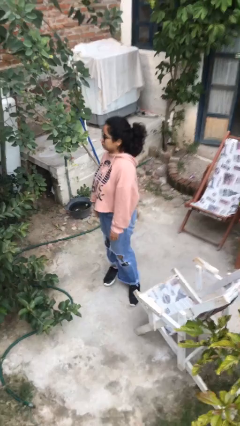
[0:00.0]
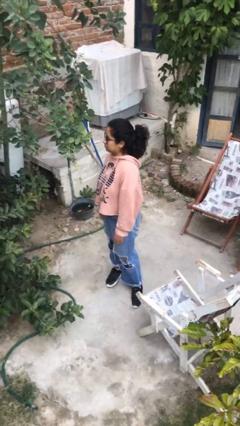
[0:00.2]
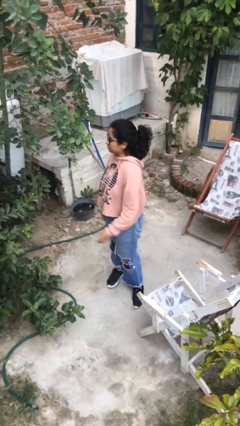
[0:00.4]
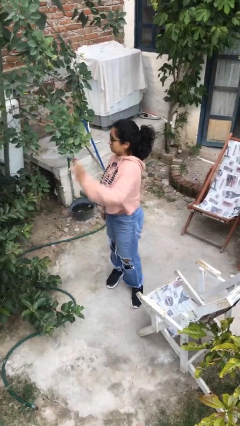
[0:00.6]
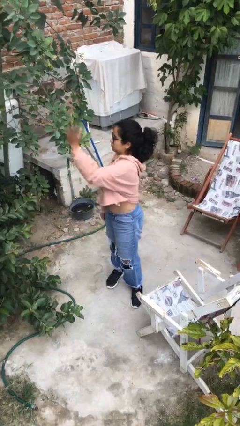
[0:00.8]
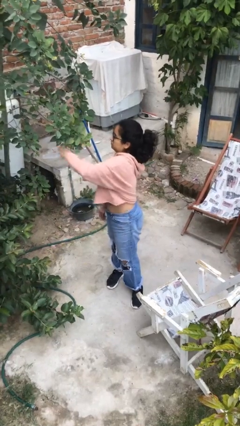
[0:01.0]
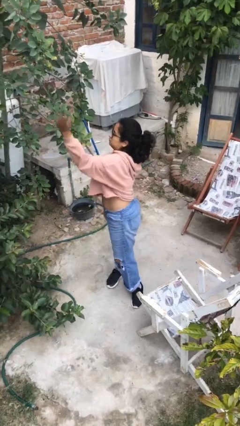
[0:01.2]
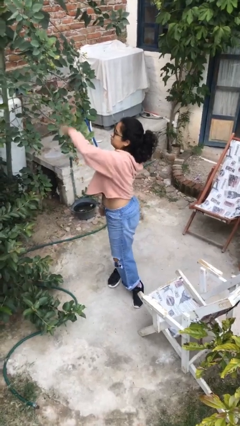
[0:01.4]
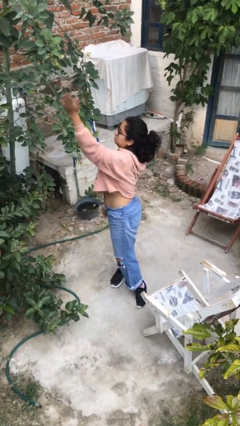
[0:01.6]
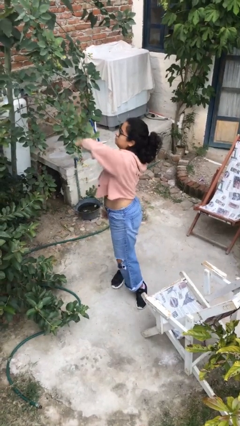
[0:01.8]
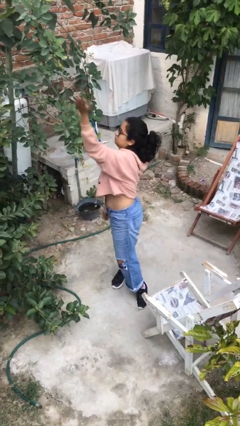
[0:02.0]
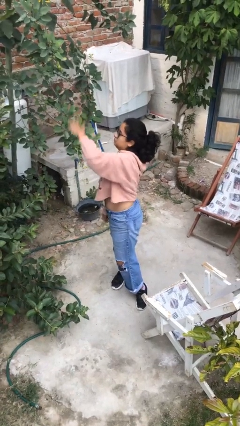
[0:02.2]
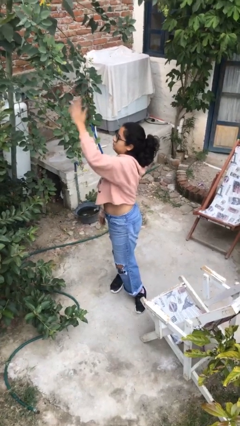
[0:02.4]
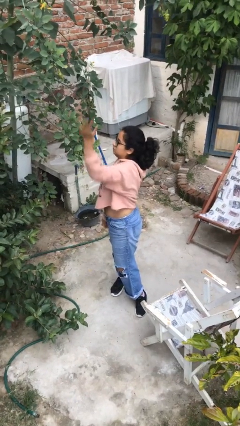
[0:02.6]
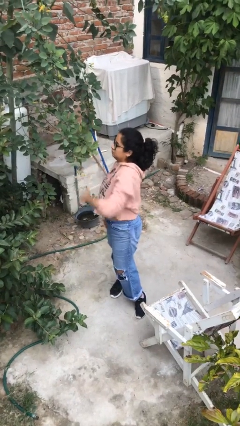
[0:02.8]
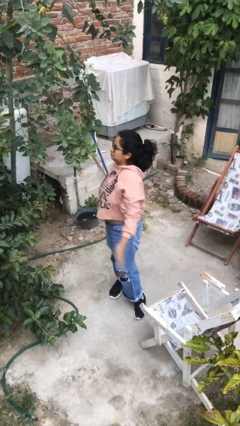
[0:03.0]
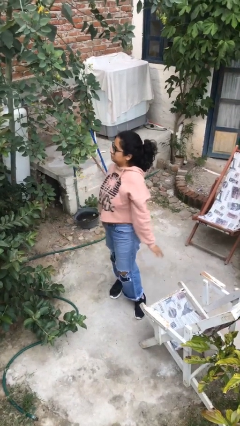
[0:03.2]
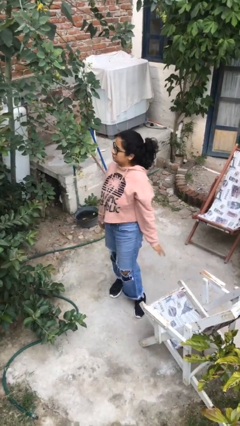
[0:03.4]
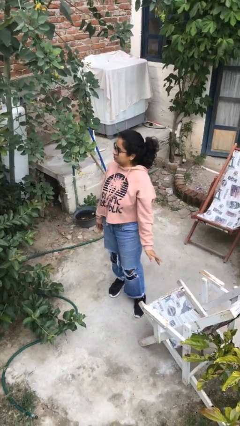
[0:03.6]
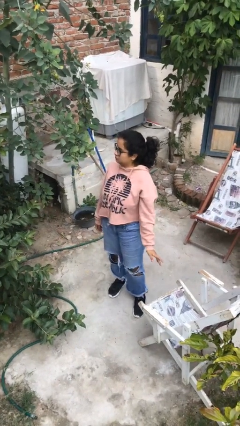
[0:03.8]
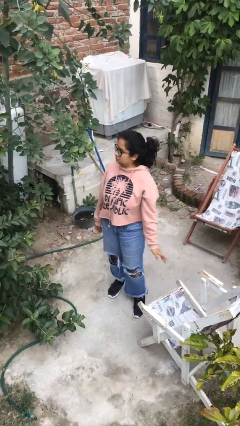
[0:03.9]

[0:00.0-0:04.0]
person punches

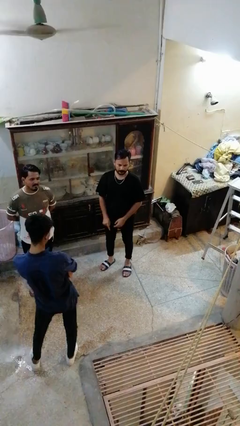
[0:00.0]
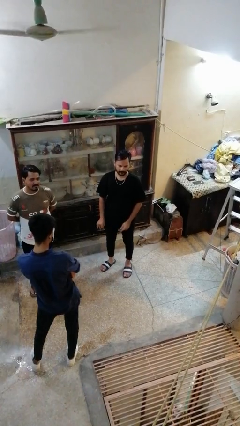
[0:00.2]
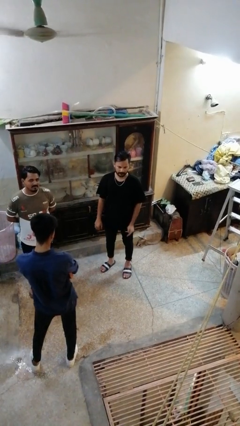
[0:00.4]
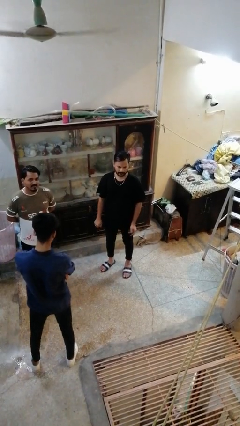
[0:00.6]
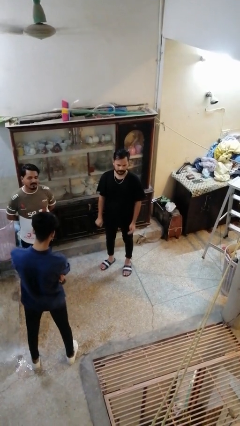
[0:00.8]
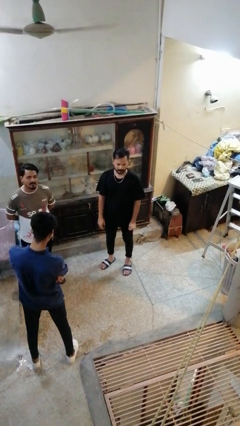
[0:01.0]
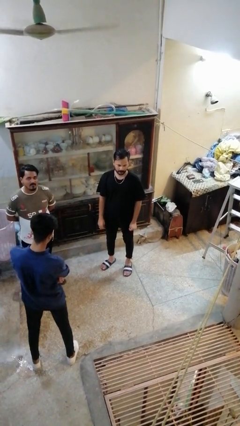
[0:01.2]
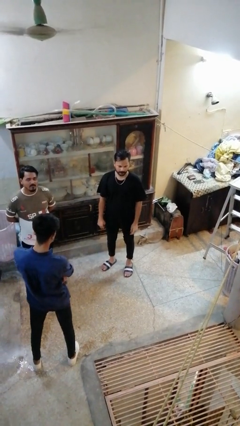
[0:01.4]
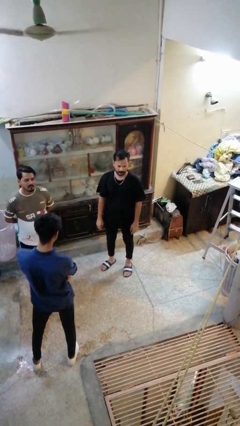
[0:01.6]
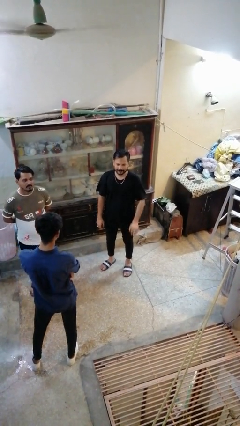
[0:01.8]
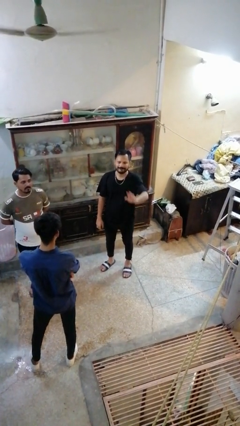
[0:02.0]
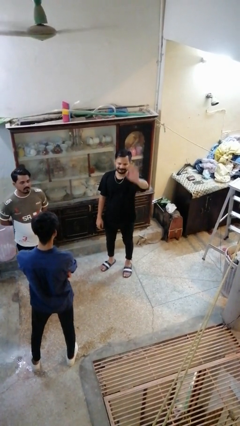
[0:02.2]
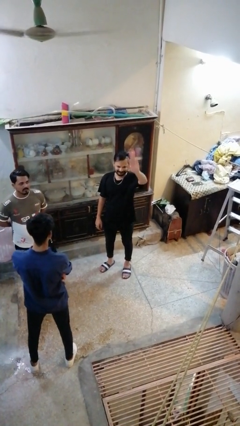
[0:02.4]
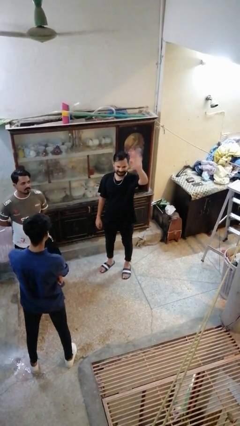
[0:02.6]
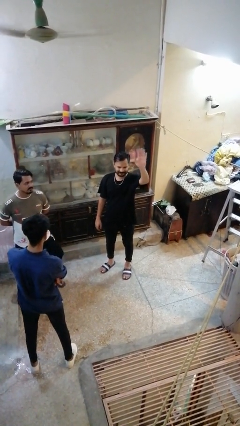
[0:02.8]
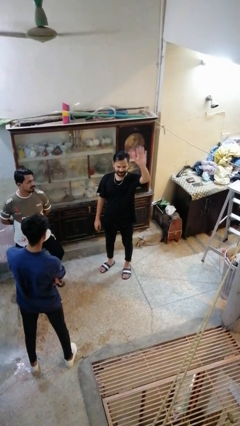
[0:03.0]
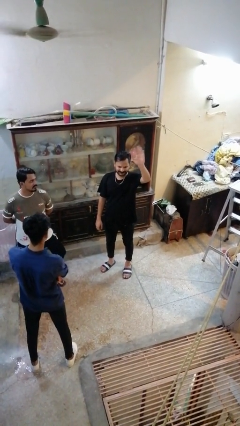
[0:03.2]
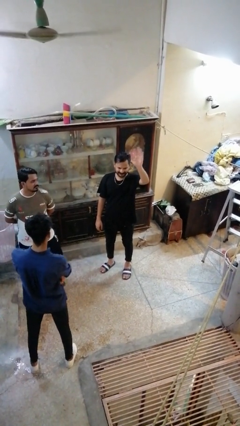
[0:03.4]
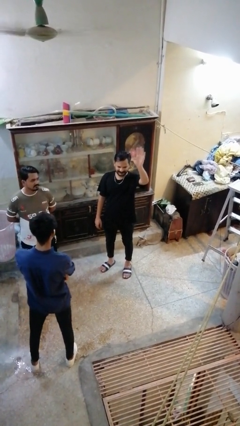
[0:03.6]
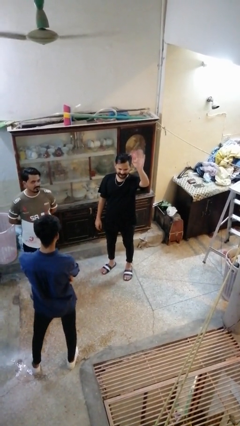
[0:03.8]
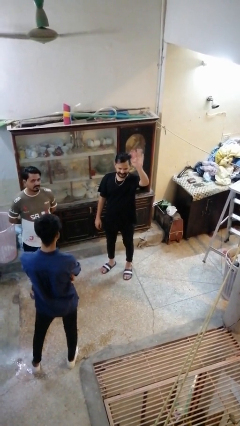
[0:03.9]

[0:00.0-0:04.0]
person waves at person

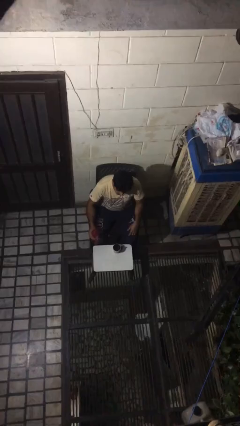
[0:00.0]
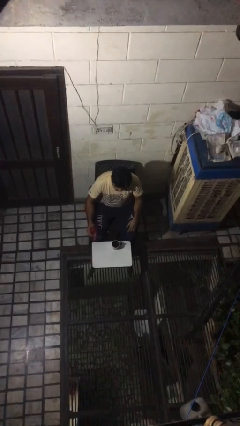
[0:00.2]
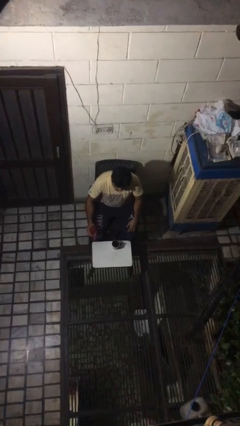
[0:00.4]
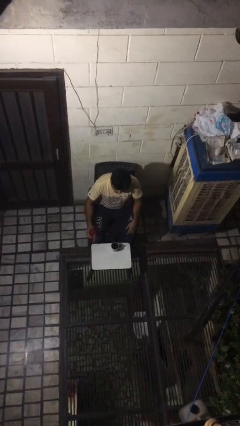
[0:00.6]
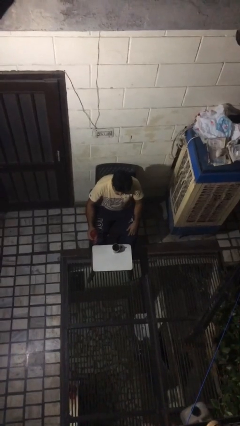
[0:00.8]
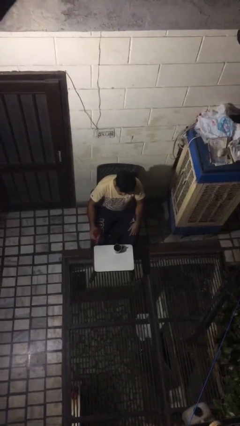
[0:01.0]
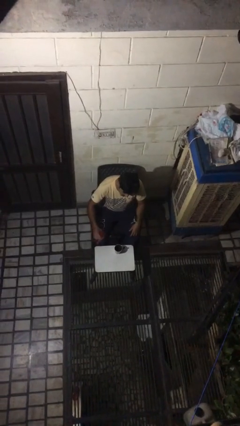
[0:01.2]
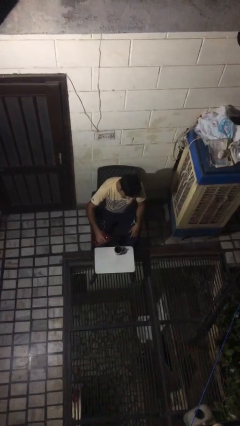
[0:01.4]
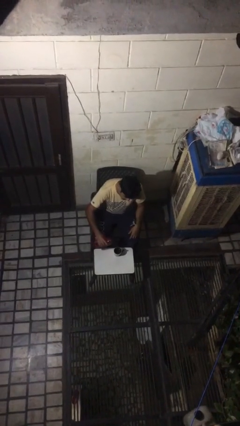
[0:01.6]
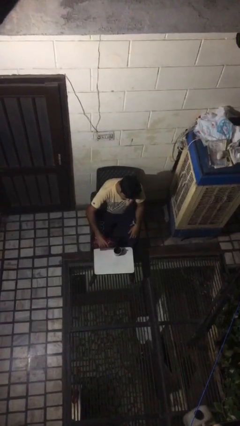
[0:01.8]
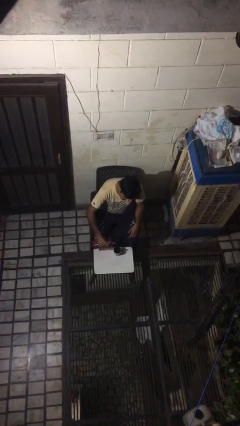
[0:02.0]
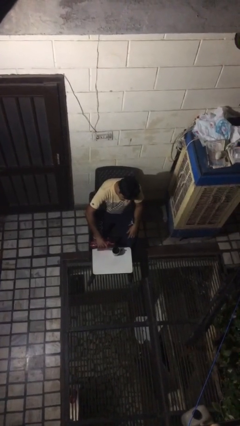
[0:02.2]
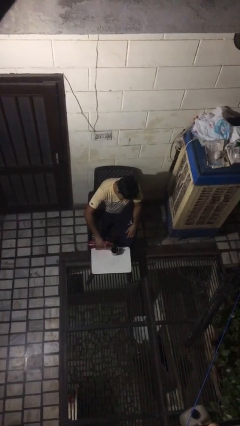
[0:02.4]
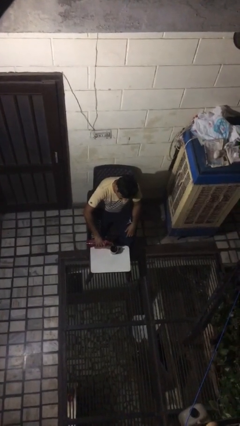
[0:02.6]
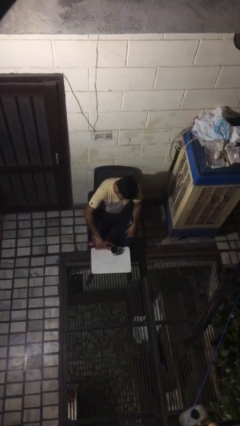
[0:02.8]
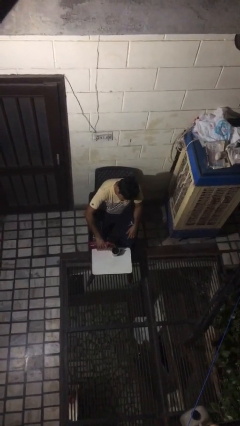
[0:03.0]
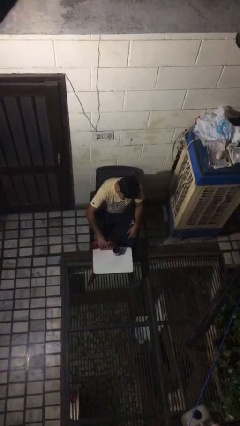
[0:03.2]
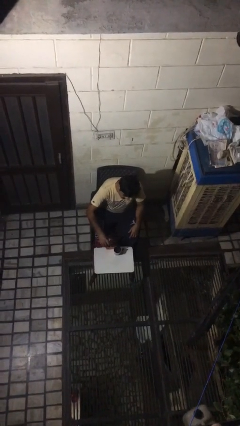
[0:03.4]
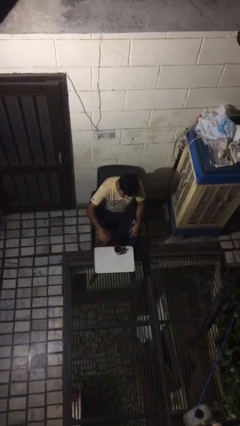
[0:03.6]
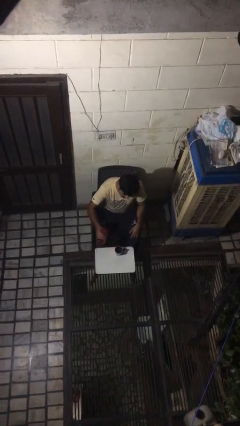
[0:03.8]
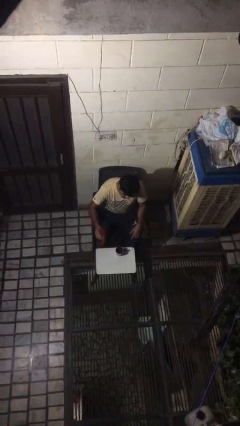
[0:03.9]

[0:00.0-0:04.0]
person pours liquid into cup

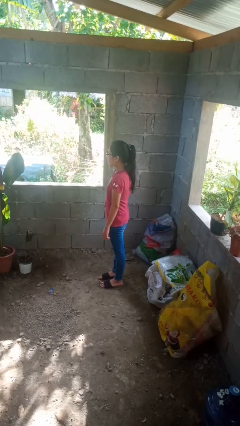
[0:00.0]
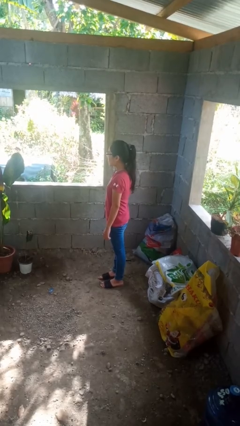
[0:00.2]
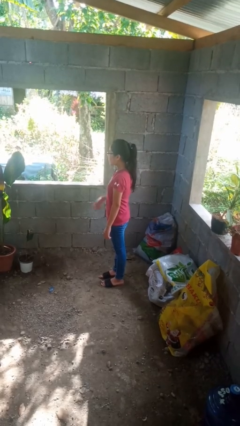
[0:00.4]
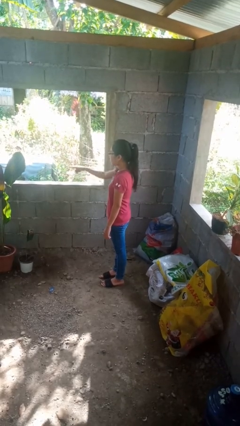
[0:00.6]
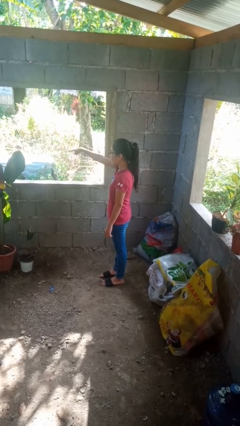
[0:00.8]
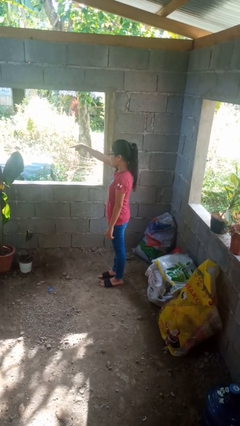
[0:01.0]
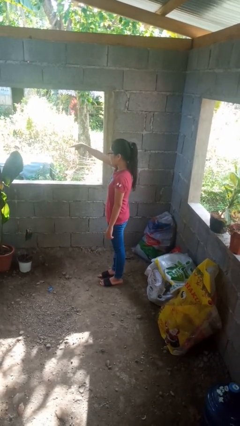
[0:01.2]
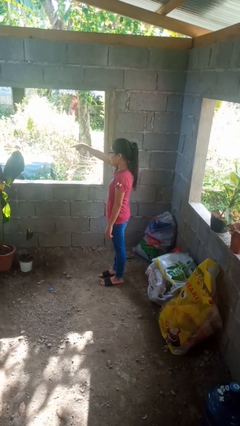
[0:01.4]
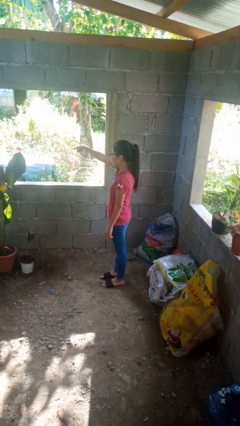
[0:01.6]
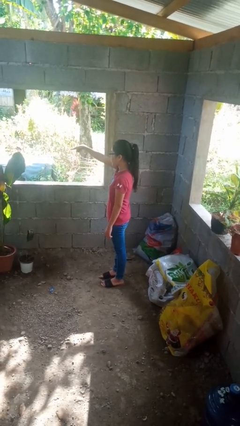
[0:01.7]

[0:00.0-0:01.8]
person points at person

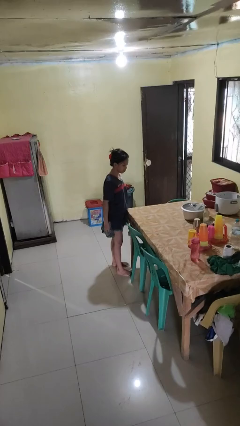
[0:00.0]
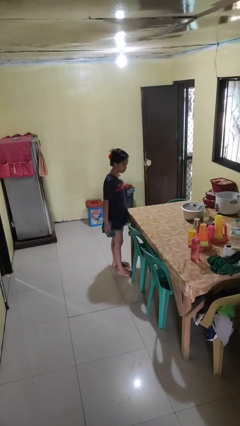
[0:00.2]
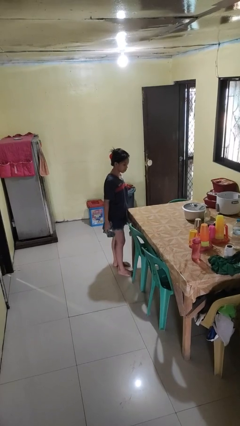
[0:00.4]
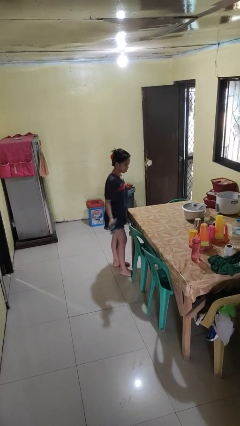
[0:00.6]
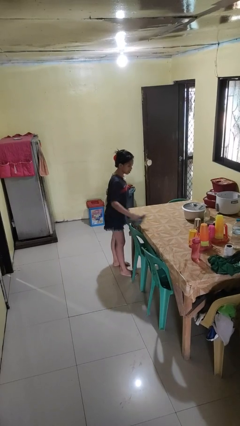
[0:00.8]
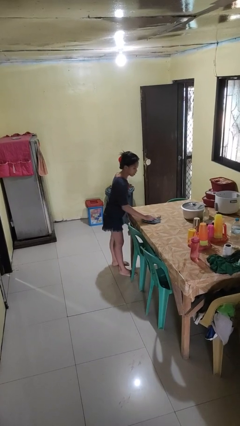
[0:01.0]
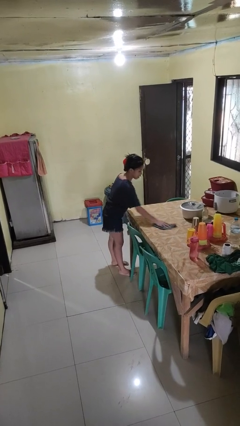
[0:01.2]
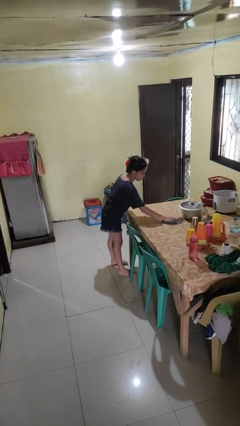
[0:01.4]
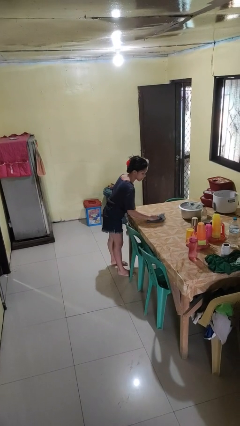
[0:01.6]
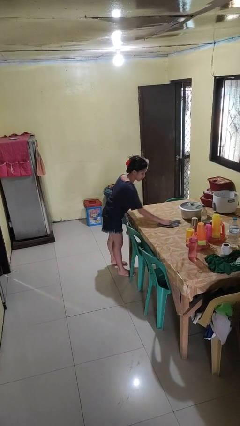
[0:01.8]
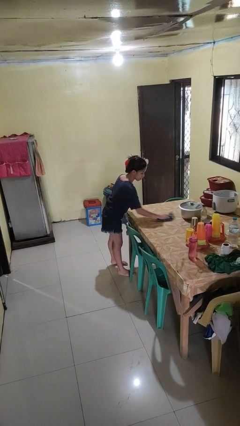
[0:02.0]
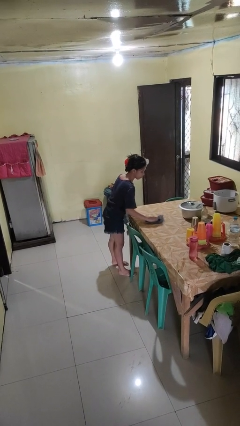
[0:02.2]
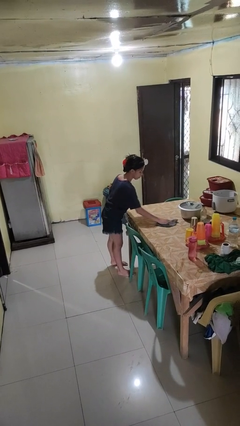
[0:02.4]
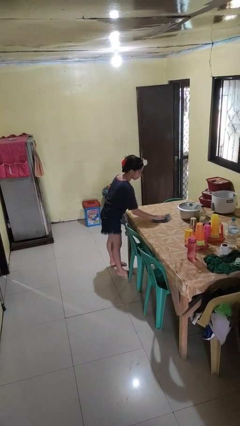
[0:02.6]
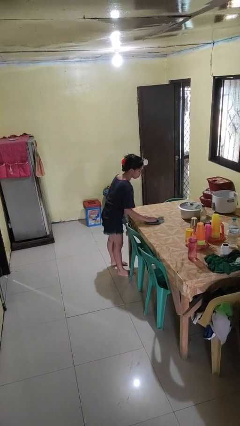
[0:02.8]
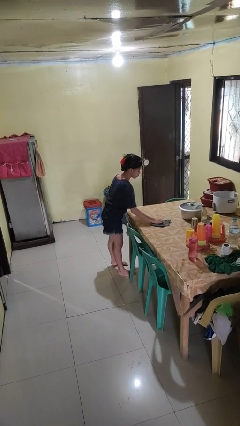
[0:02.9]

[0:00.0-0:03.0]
person cleans table with rag

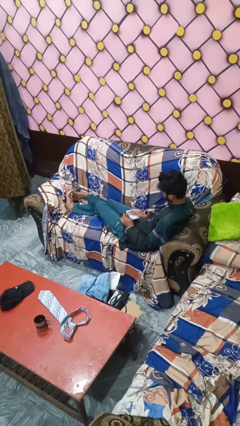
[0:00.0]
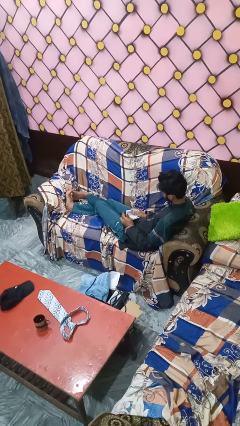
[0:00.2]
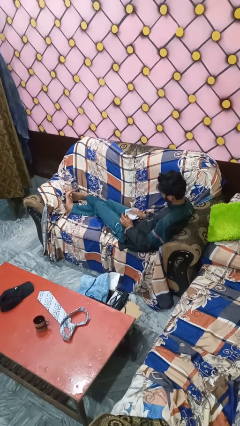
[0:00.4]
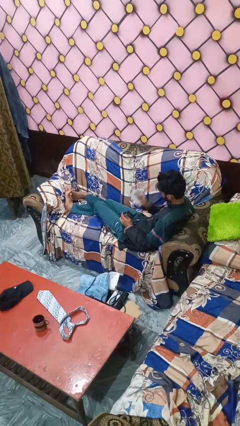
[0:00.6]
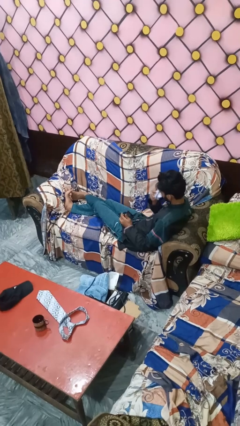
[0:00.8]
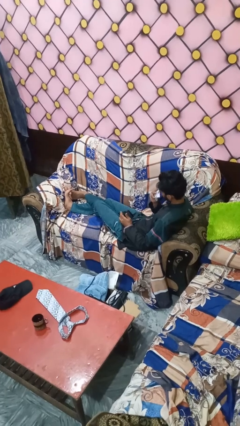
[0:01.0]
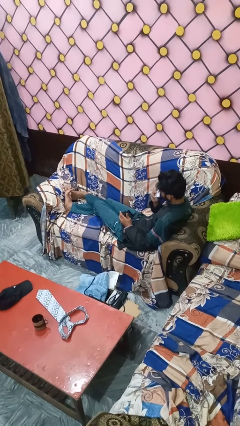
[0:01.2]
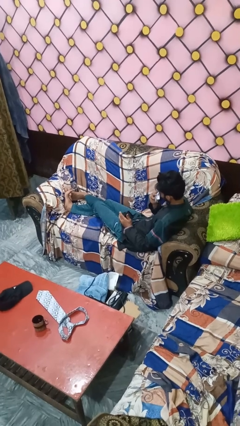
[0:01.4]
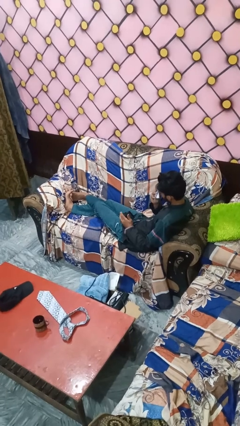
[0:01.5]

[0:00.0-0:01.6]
person blows nose
